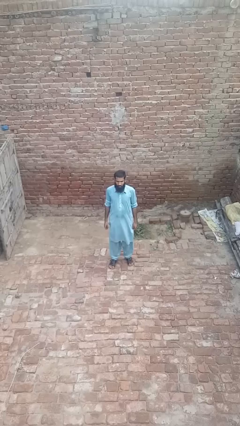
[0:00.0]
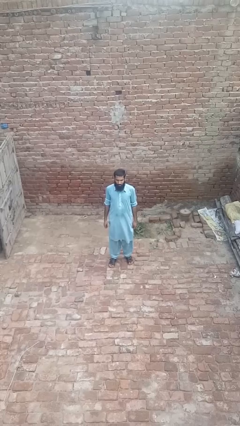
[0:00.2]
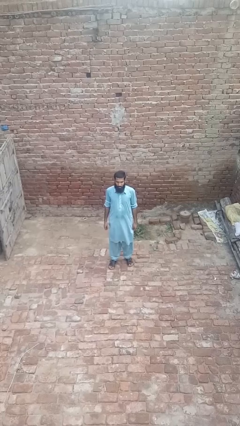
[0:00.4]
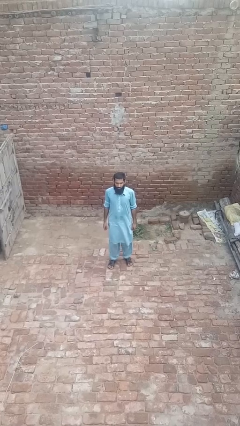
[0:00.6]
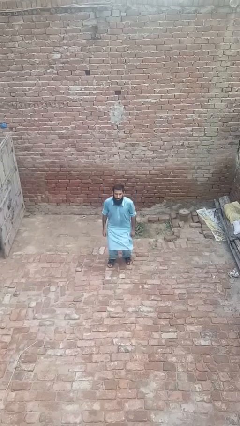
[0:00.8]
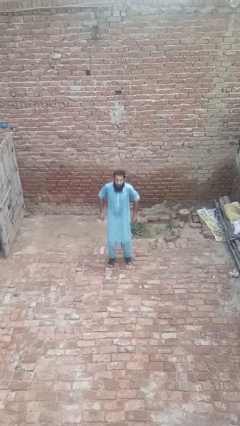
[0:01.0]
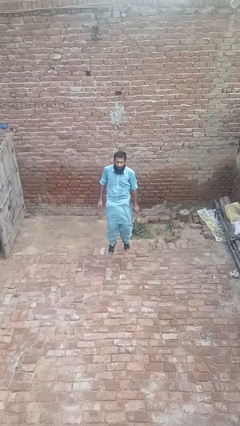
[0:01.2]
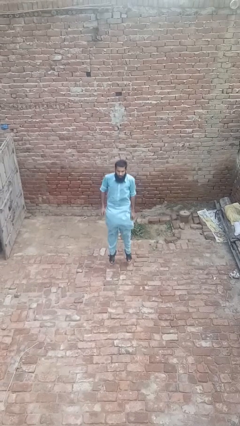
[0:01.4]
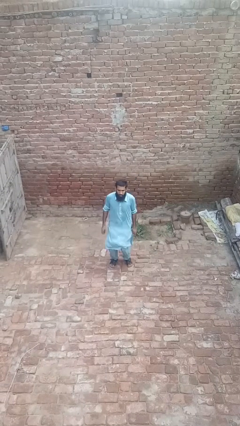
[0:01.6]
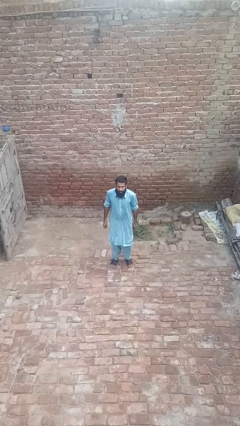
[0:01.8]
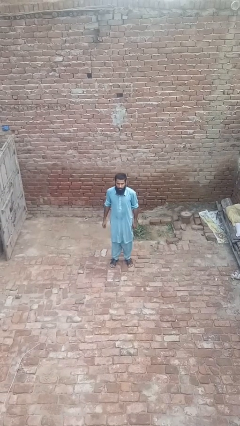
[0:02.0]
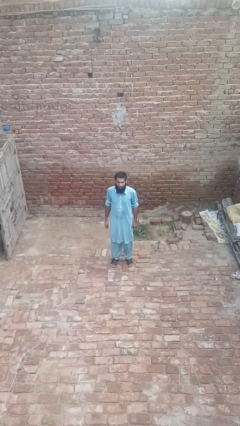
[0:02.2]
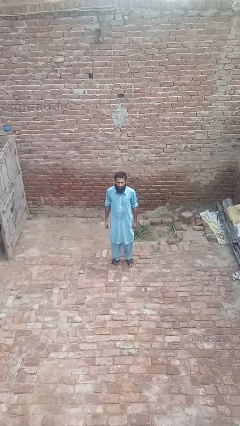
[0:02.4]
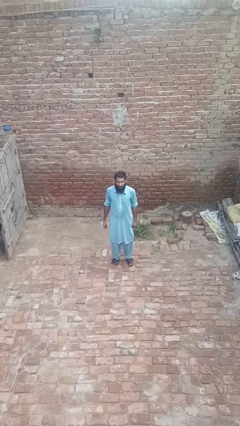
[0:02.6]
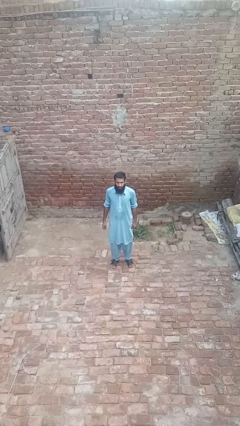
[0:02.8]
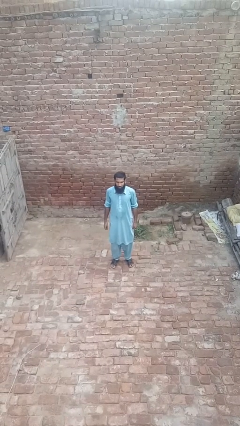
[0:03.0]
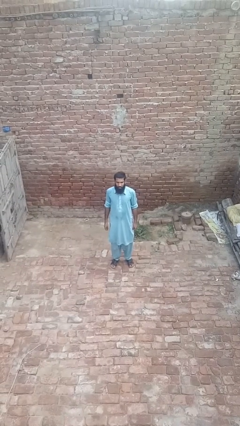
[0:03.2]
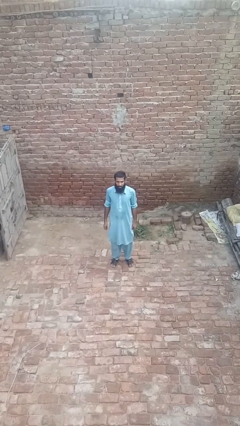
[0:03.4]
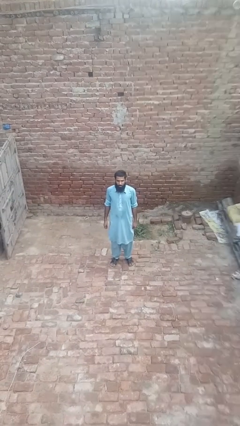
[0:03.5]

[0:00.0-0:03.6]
person jumps

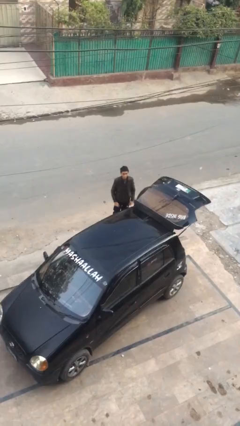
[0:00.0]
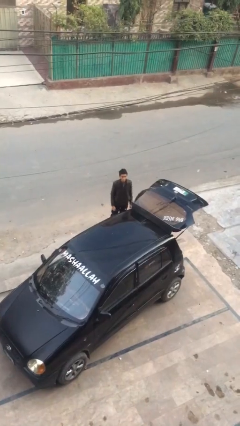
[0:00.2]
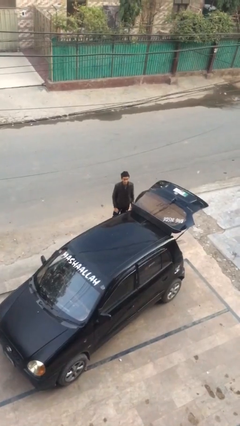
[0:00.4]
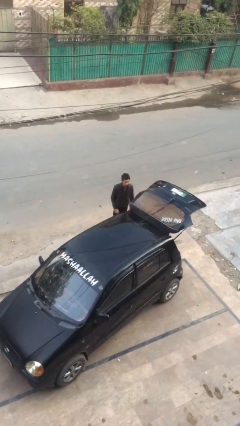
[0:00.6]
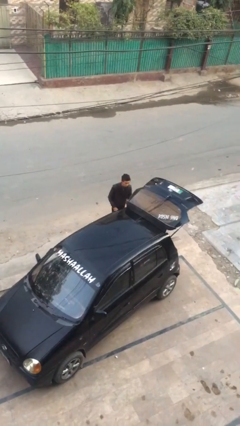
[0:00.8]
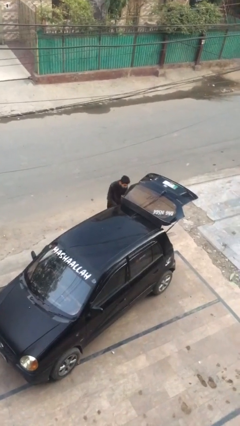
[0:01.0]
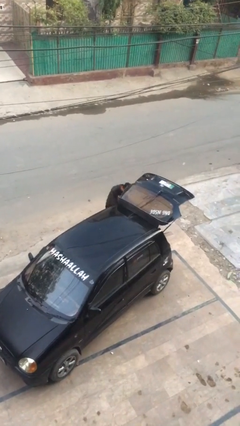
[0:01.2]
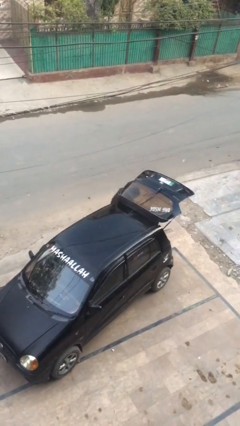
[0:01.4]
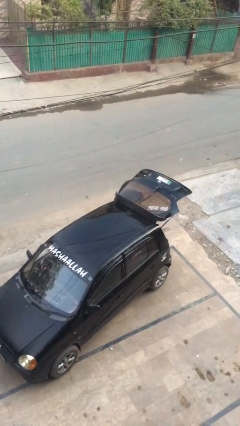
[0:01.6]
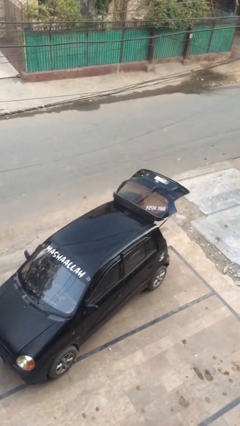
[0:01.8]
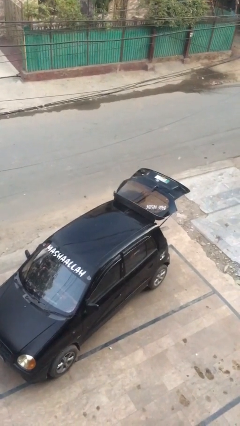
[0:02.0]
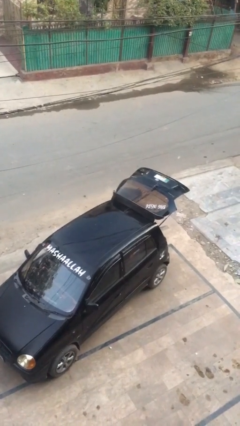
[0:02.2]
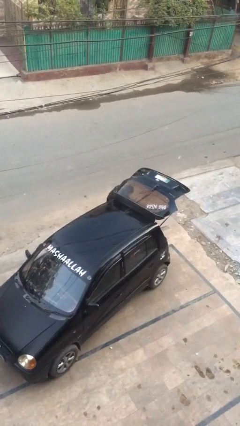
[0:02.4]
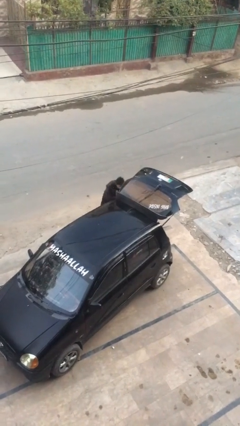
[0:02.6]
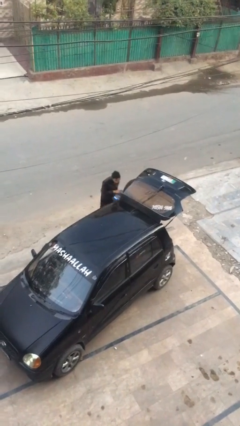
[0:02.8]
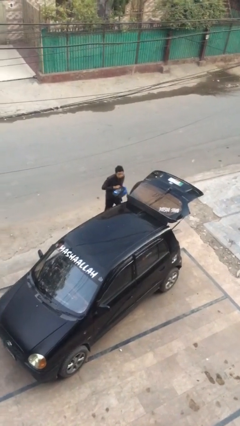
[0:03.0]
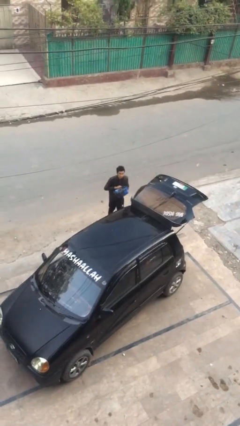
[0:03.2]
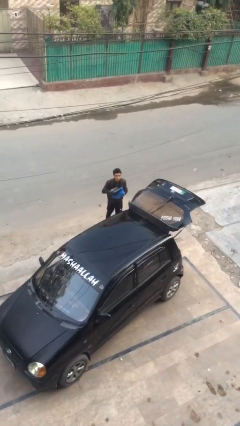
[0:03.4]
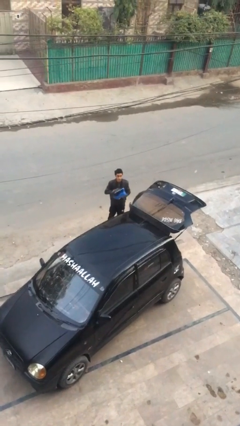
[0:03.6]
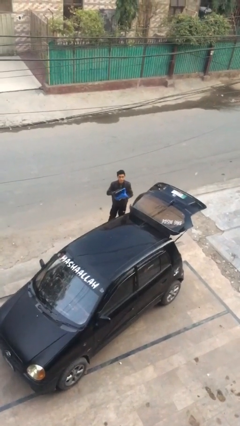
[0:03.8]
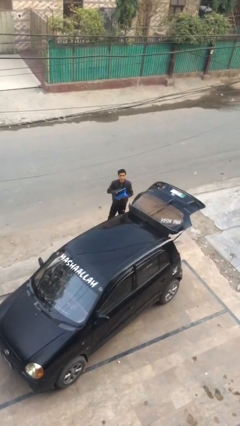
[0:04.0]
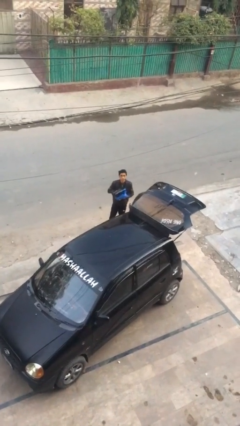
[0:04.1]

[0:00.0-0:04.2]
person unloads car

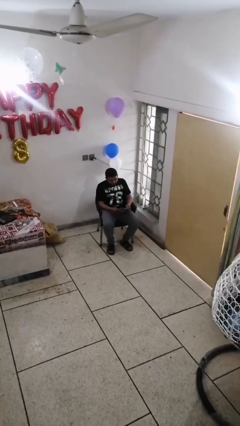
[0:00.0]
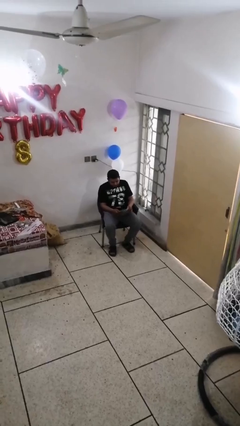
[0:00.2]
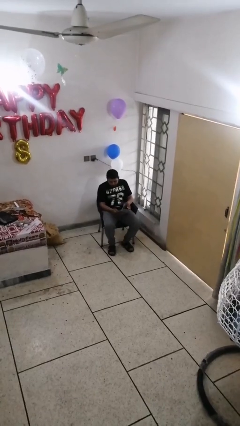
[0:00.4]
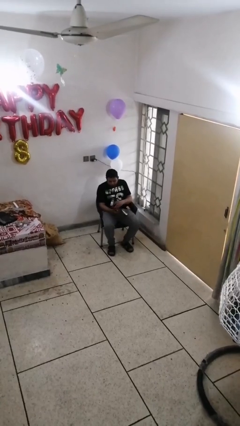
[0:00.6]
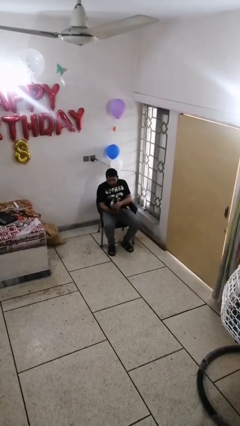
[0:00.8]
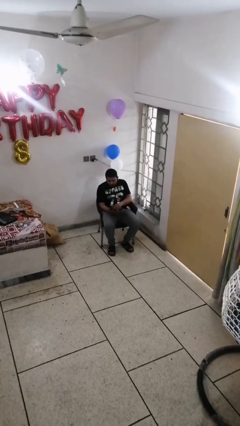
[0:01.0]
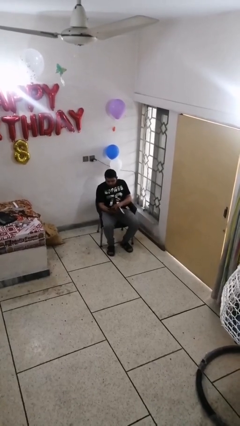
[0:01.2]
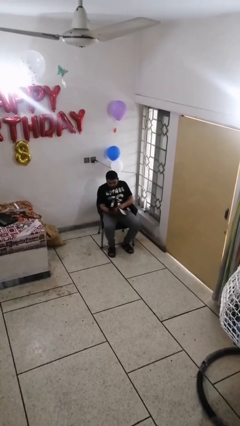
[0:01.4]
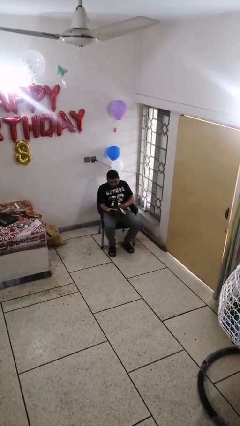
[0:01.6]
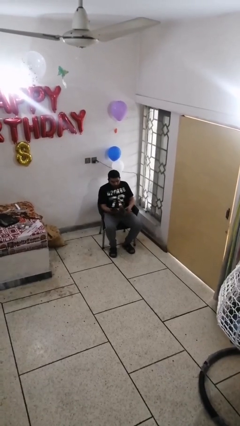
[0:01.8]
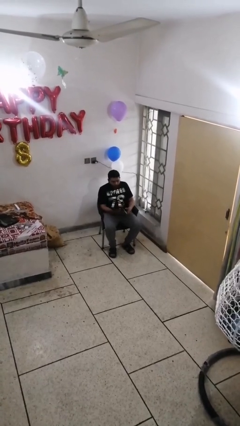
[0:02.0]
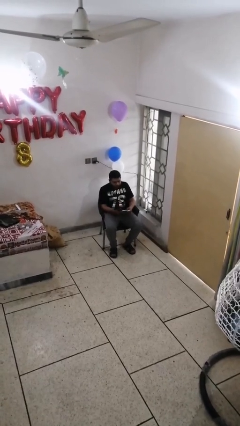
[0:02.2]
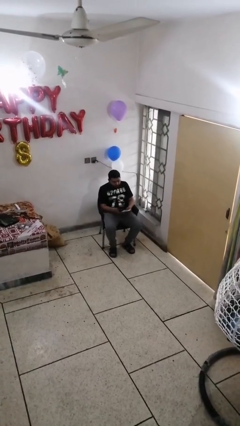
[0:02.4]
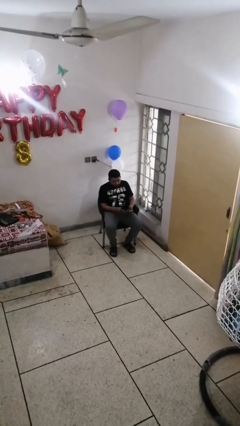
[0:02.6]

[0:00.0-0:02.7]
person reads document

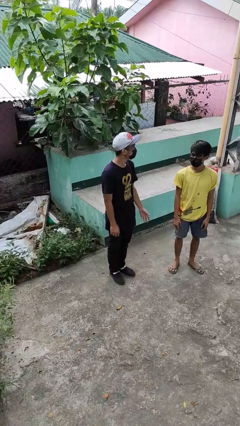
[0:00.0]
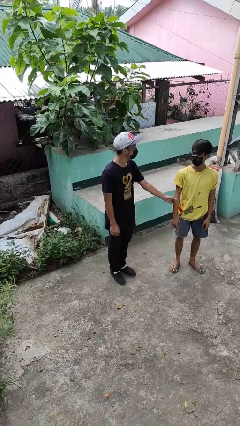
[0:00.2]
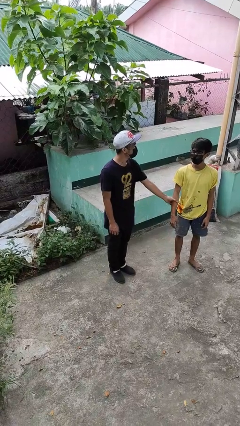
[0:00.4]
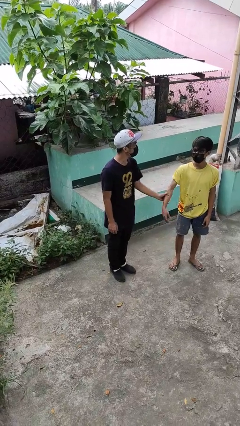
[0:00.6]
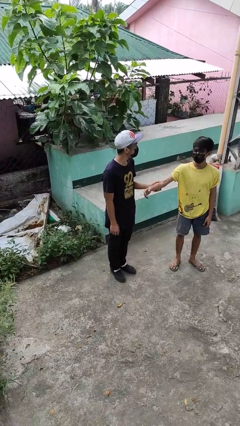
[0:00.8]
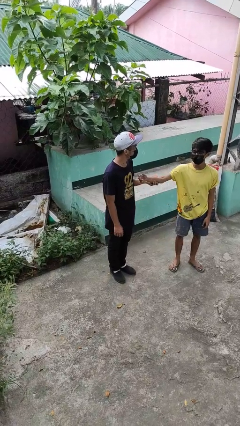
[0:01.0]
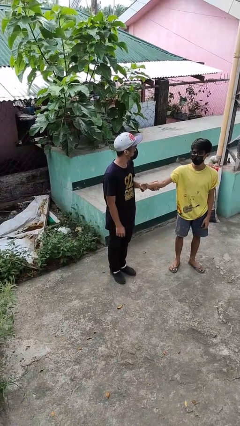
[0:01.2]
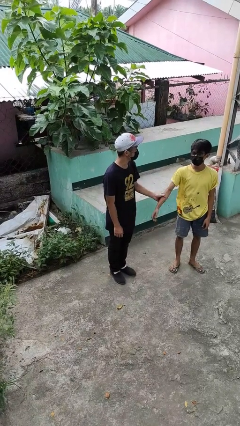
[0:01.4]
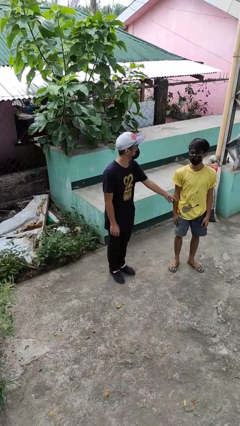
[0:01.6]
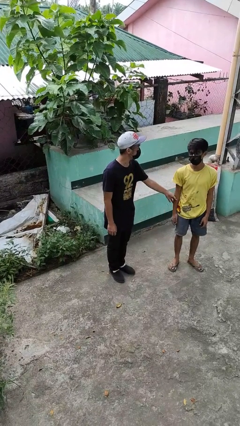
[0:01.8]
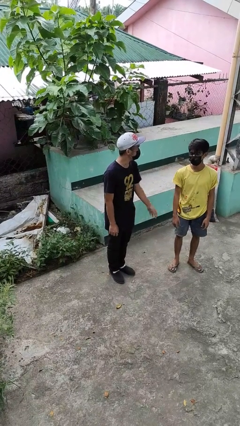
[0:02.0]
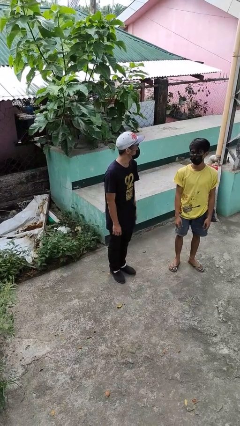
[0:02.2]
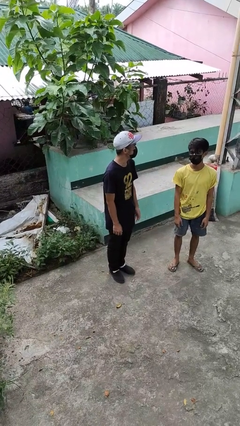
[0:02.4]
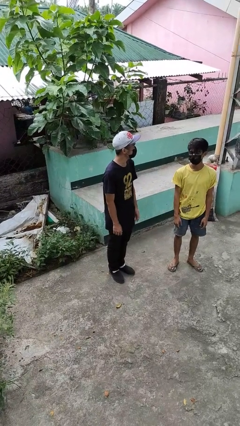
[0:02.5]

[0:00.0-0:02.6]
person grabs person by forearm

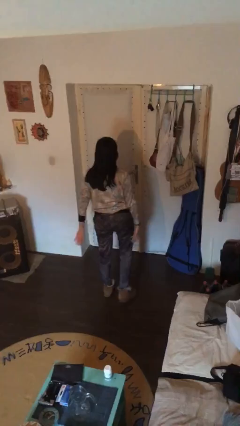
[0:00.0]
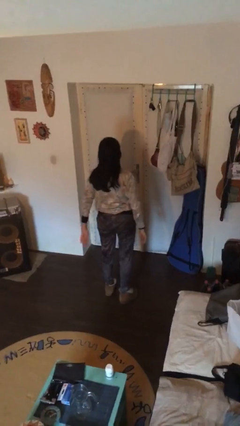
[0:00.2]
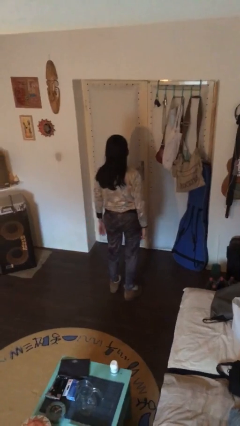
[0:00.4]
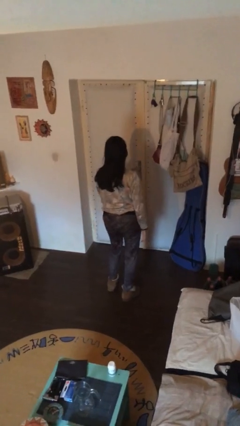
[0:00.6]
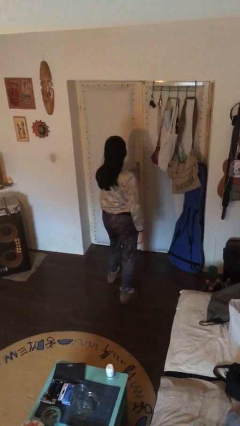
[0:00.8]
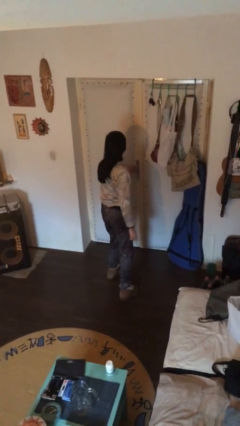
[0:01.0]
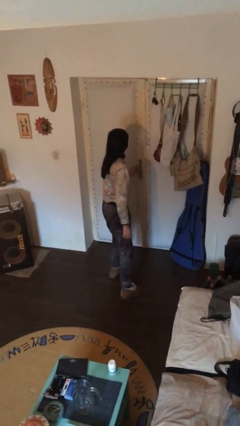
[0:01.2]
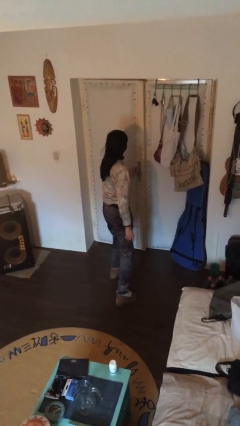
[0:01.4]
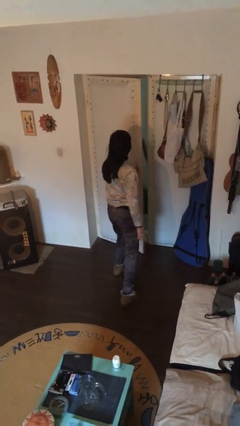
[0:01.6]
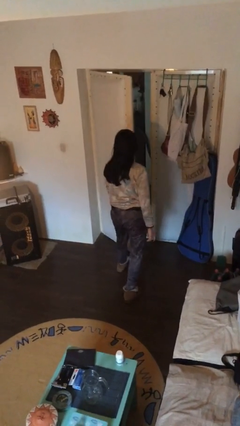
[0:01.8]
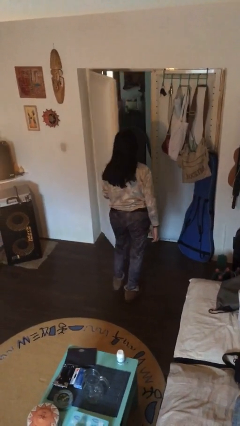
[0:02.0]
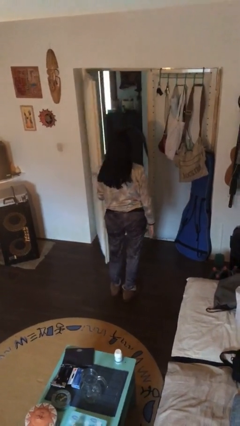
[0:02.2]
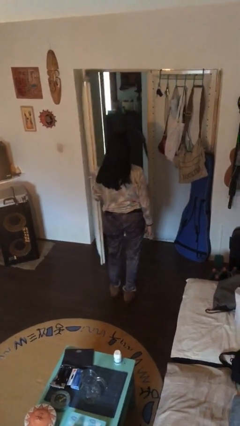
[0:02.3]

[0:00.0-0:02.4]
person opens facility door

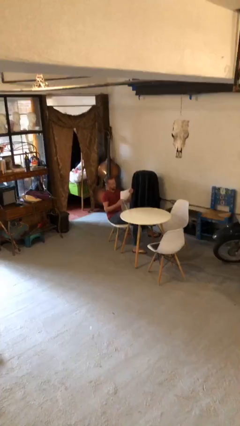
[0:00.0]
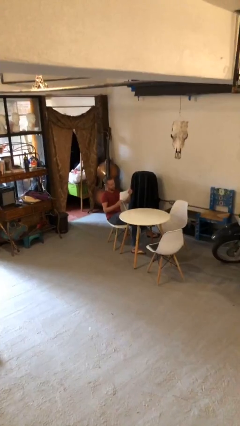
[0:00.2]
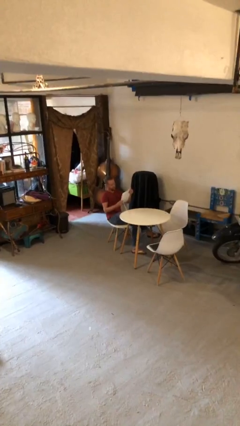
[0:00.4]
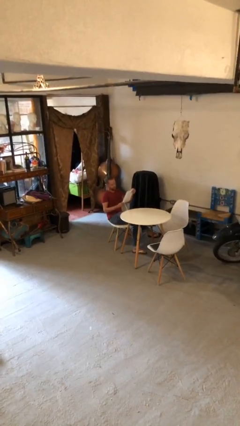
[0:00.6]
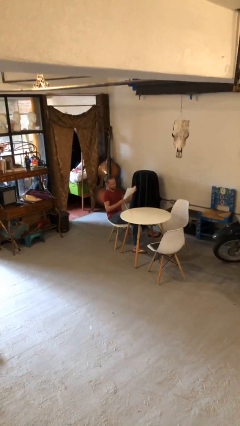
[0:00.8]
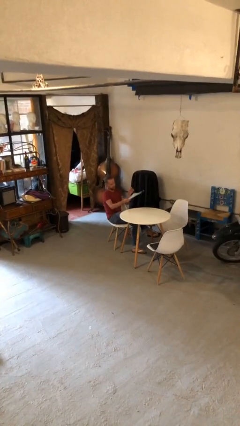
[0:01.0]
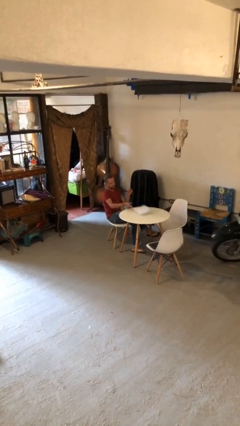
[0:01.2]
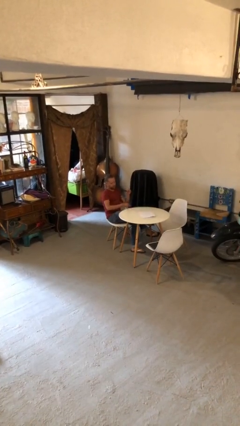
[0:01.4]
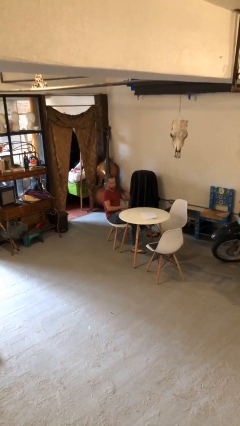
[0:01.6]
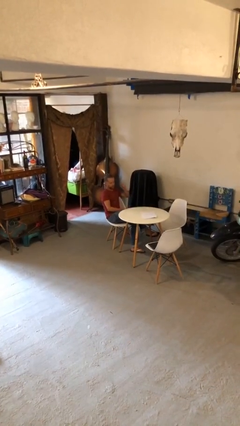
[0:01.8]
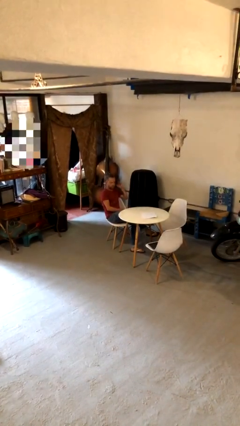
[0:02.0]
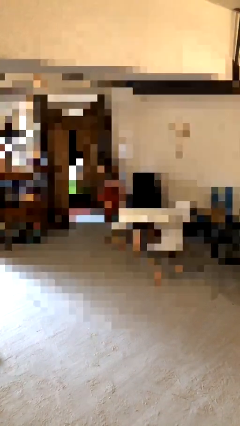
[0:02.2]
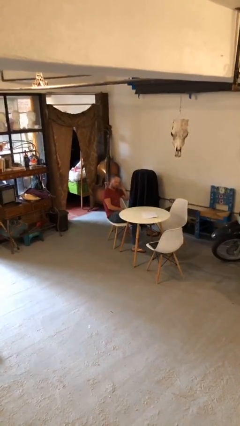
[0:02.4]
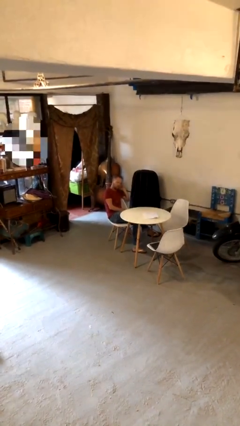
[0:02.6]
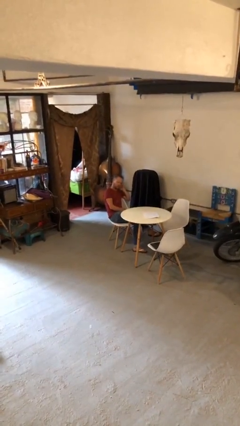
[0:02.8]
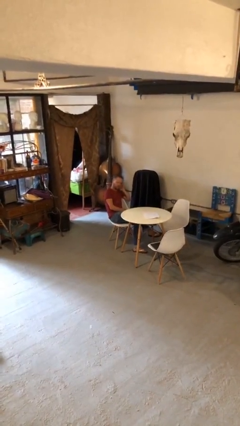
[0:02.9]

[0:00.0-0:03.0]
person puts down object on table
